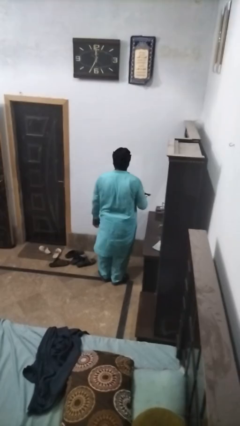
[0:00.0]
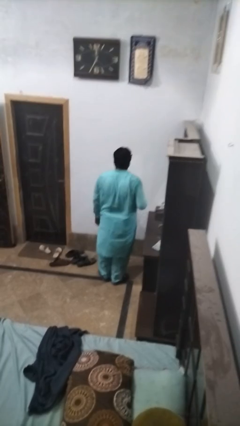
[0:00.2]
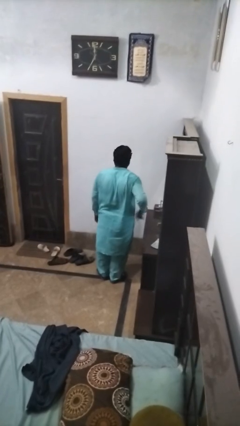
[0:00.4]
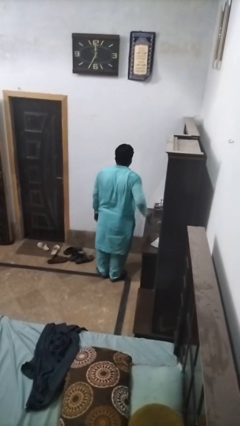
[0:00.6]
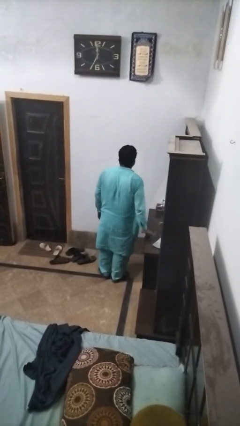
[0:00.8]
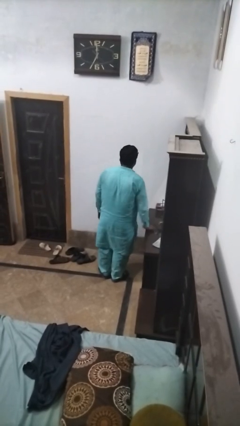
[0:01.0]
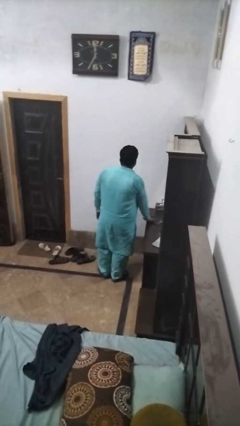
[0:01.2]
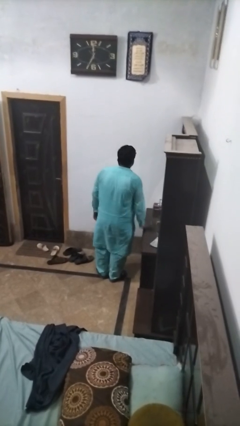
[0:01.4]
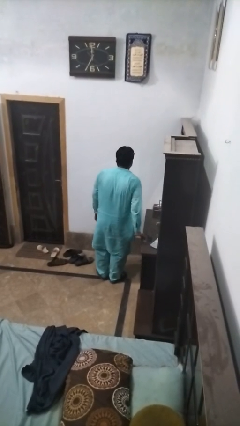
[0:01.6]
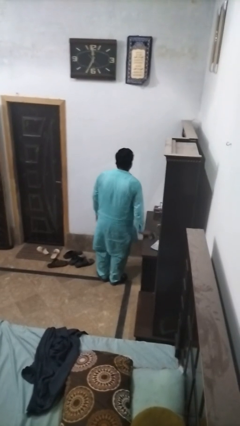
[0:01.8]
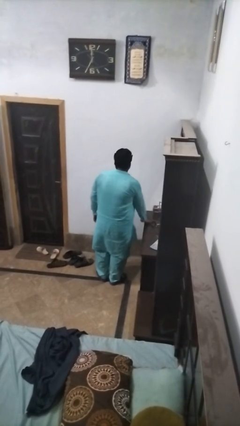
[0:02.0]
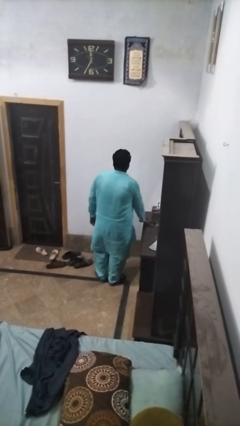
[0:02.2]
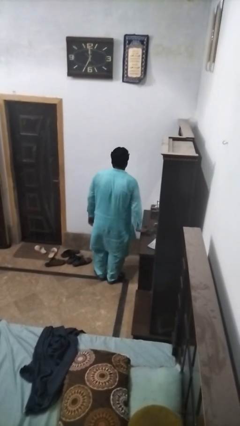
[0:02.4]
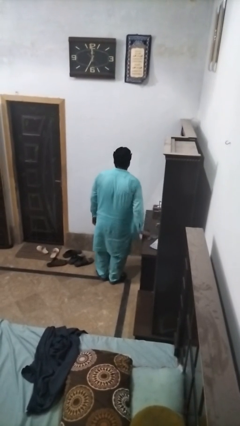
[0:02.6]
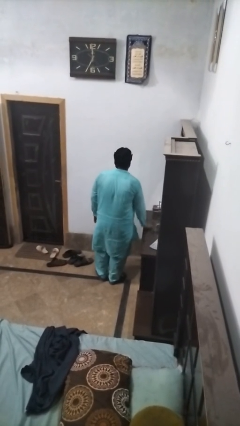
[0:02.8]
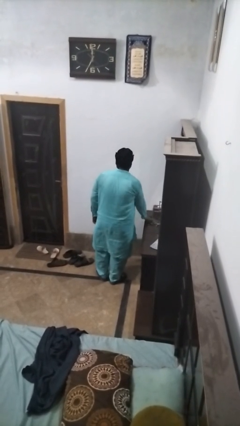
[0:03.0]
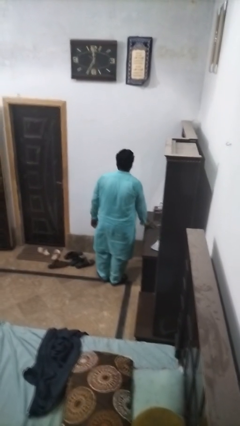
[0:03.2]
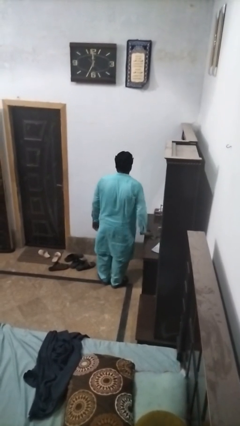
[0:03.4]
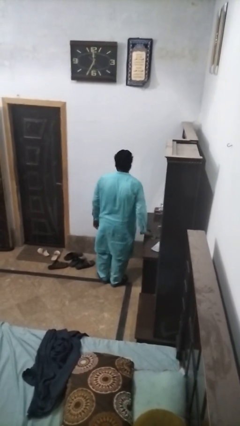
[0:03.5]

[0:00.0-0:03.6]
person cleans table with rag

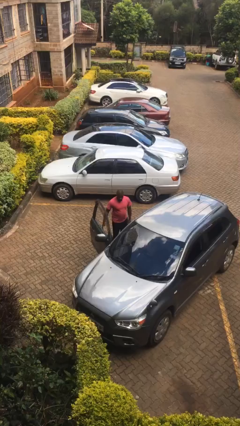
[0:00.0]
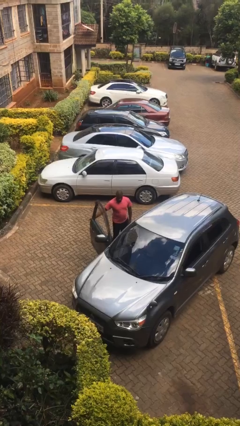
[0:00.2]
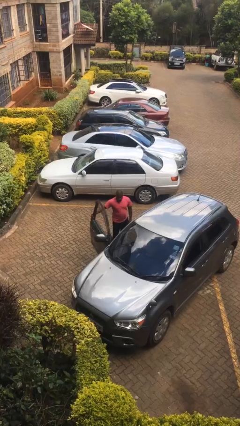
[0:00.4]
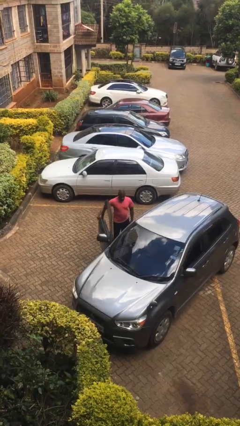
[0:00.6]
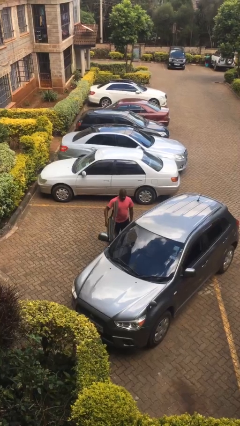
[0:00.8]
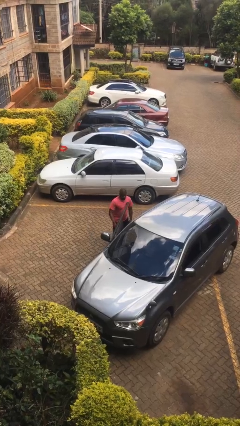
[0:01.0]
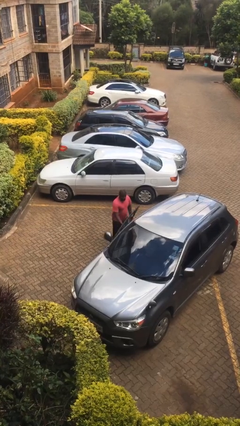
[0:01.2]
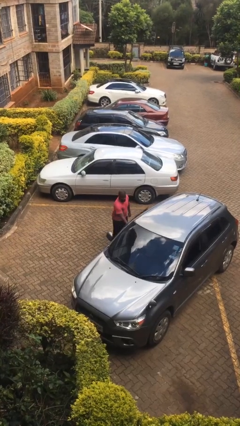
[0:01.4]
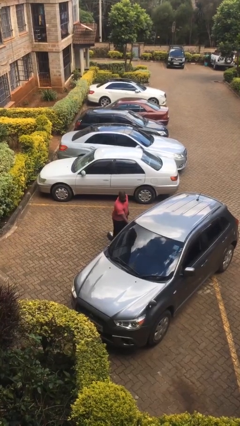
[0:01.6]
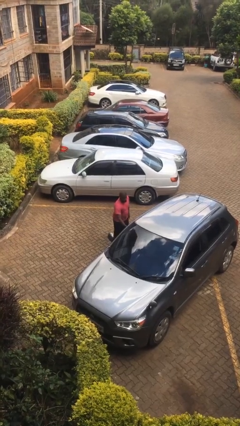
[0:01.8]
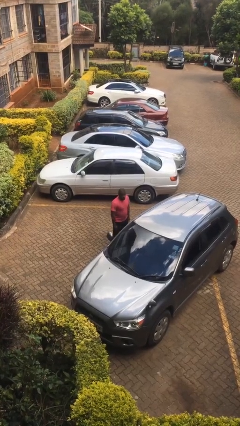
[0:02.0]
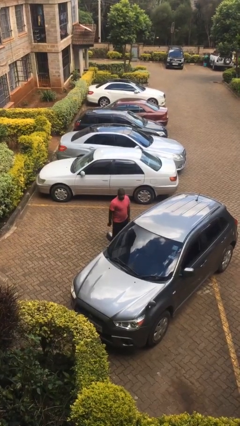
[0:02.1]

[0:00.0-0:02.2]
person closes car door

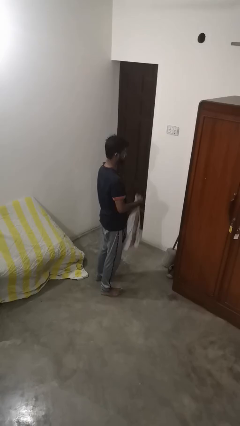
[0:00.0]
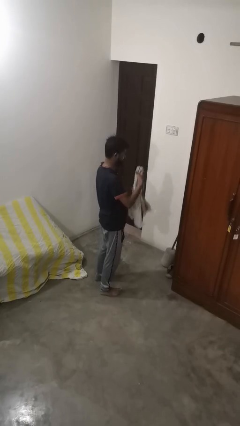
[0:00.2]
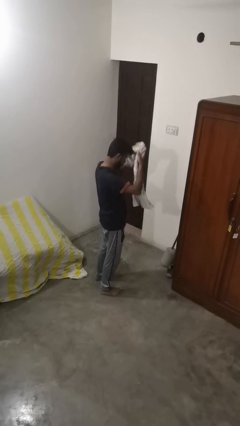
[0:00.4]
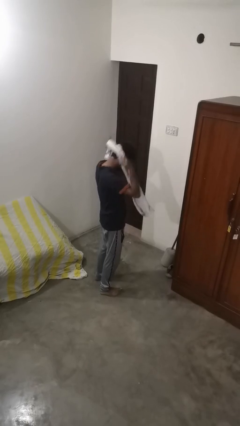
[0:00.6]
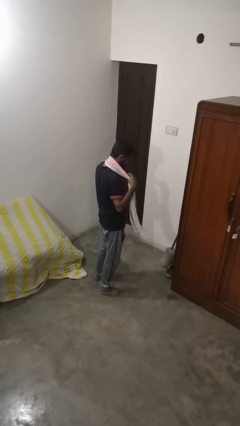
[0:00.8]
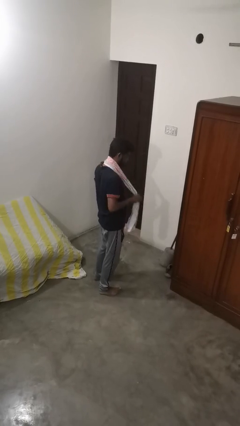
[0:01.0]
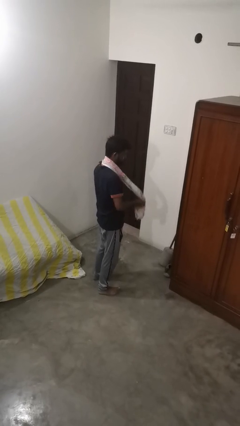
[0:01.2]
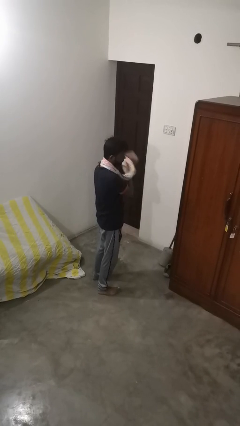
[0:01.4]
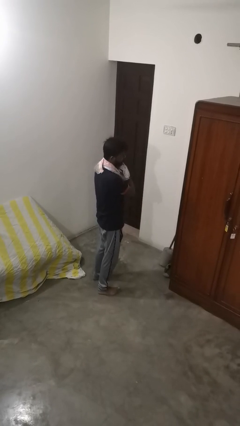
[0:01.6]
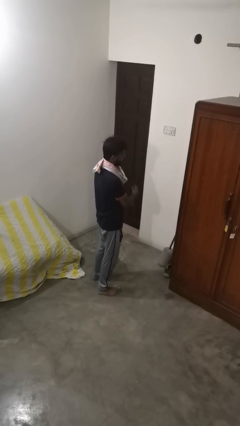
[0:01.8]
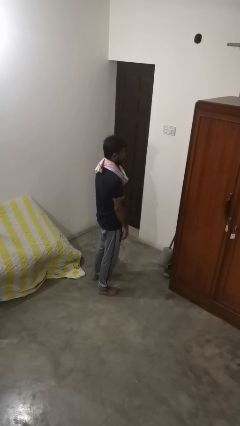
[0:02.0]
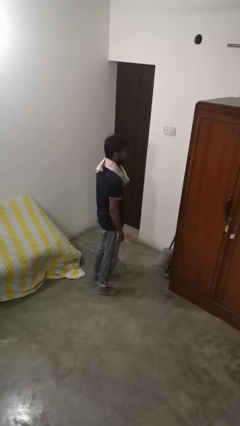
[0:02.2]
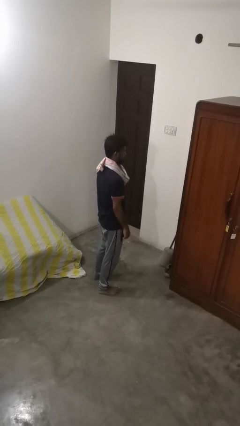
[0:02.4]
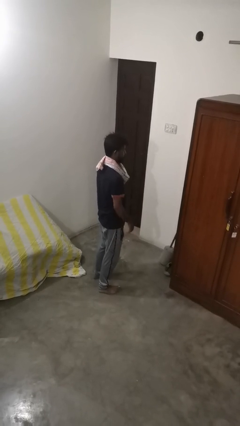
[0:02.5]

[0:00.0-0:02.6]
person puts on scarf

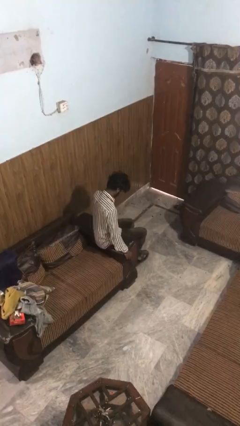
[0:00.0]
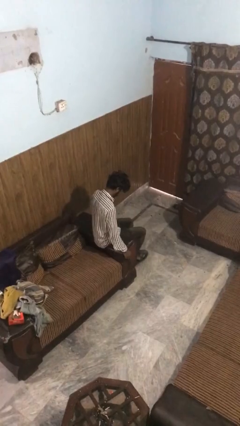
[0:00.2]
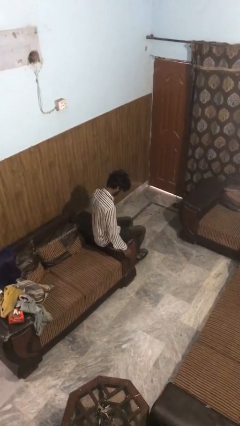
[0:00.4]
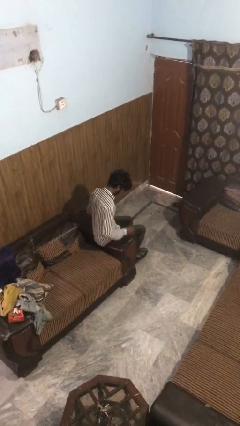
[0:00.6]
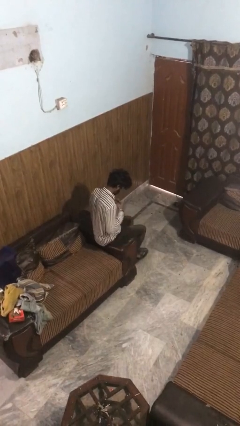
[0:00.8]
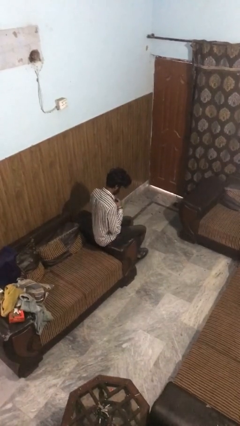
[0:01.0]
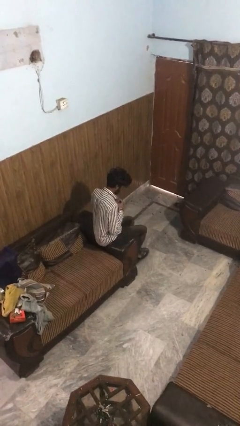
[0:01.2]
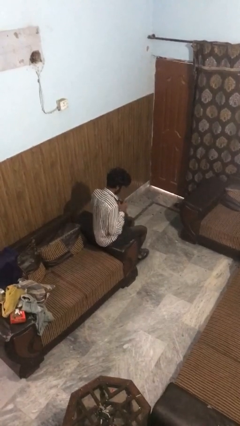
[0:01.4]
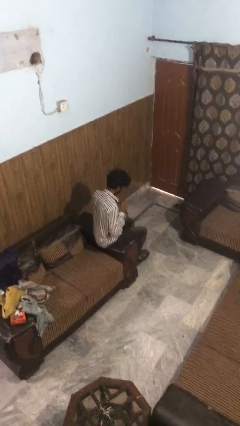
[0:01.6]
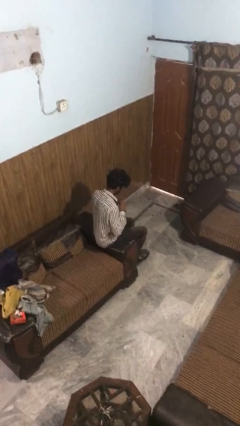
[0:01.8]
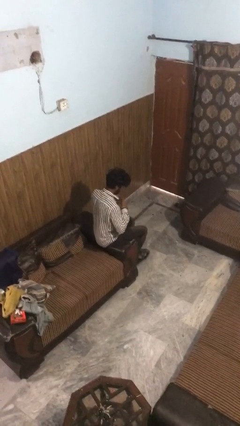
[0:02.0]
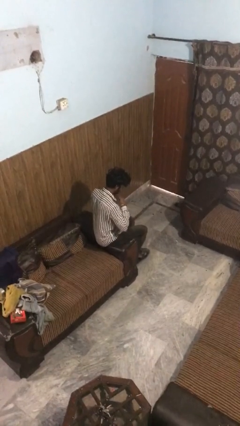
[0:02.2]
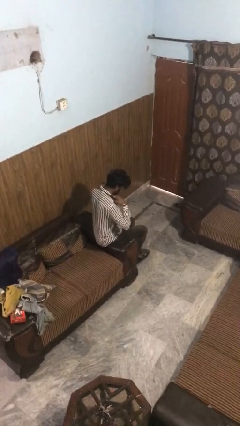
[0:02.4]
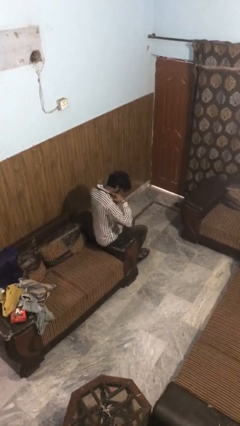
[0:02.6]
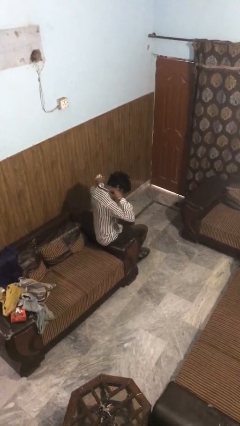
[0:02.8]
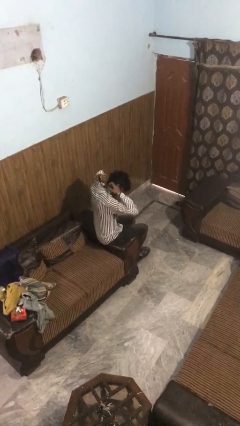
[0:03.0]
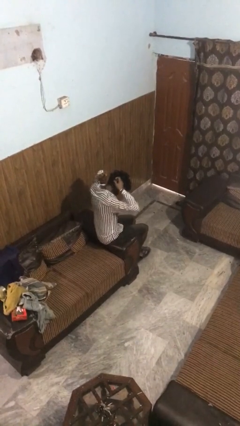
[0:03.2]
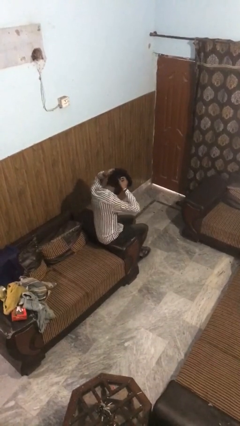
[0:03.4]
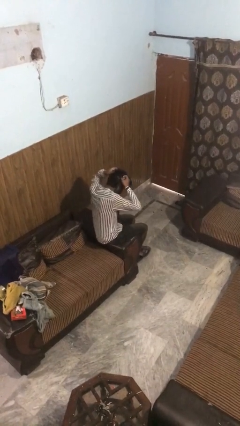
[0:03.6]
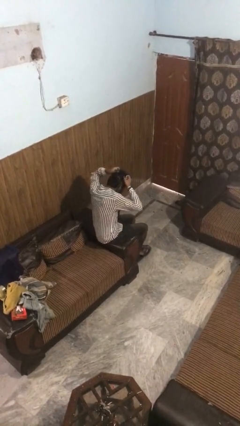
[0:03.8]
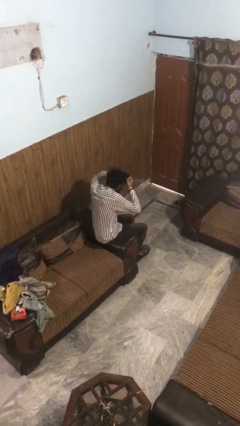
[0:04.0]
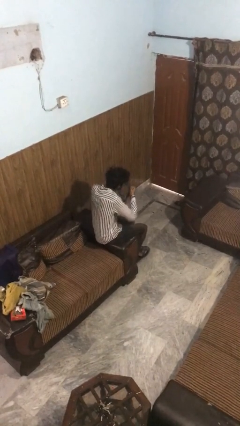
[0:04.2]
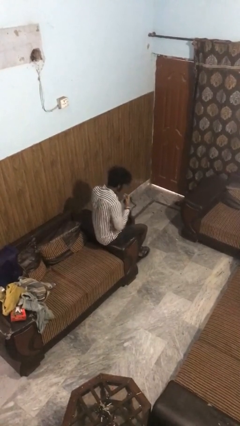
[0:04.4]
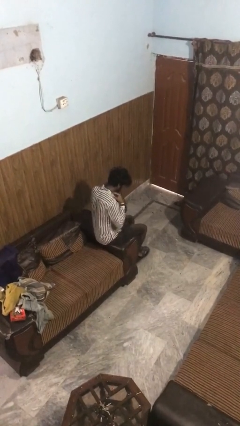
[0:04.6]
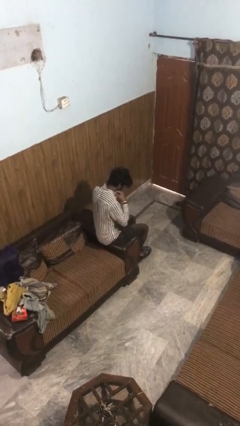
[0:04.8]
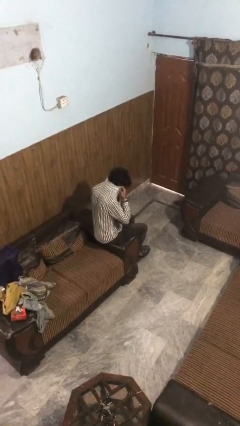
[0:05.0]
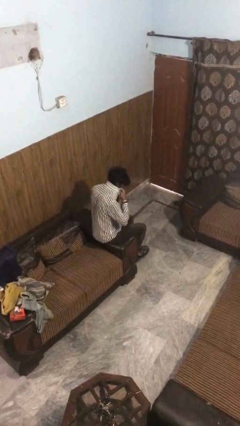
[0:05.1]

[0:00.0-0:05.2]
person takes off necktie

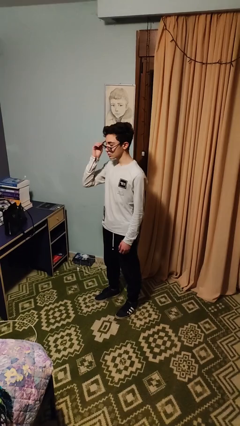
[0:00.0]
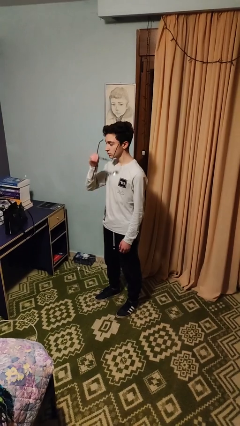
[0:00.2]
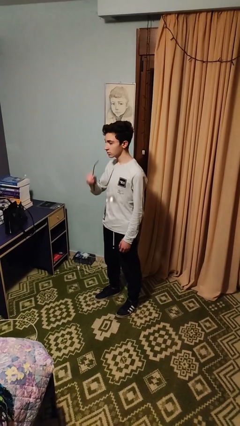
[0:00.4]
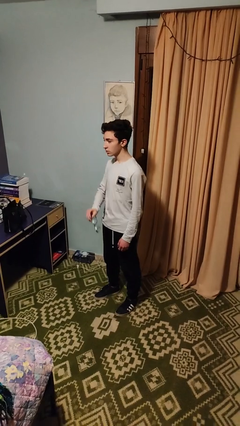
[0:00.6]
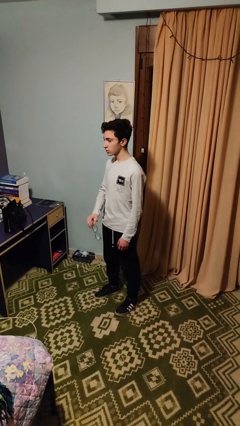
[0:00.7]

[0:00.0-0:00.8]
person takes off glasses

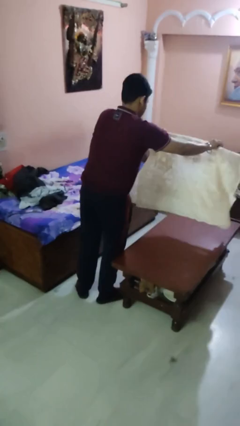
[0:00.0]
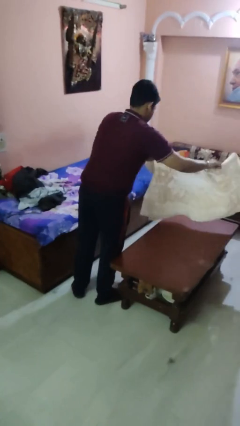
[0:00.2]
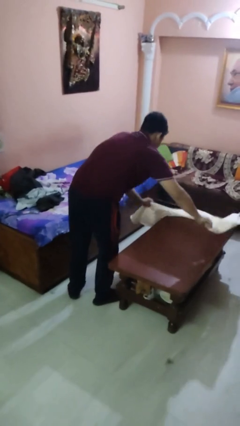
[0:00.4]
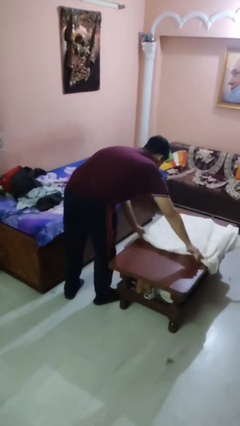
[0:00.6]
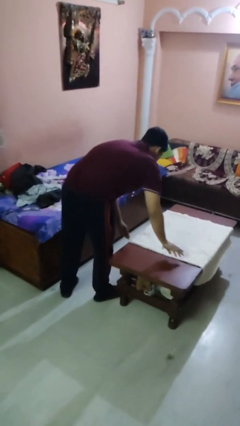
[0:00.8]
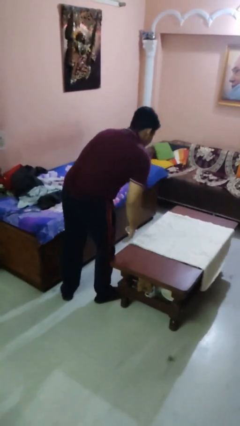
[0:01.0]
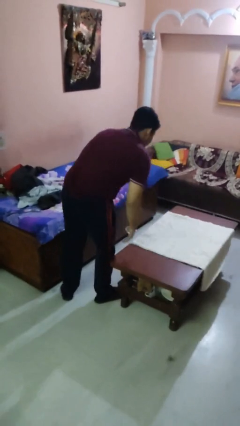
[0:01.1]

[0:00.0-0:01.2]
person spreads tablecloth

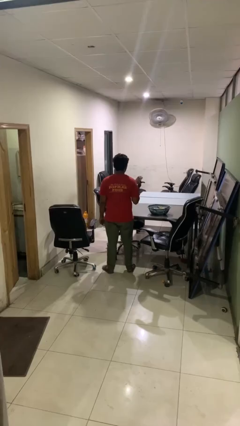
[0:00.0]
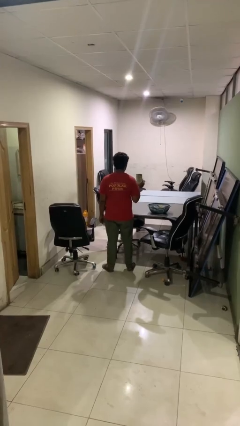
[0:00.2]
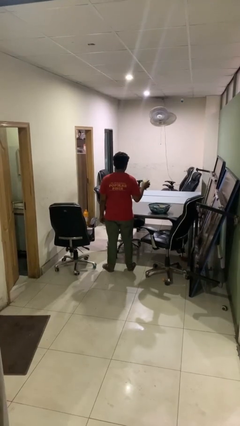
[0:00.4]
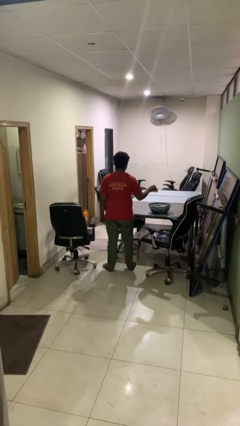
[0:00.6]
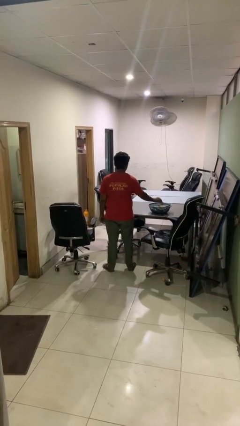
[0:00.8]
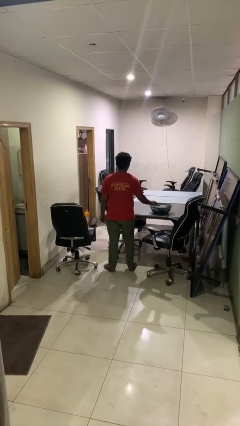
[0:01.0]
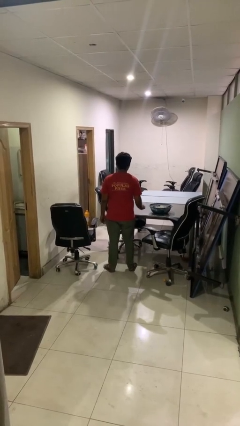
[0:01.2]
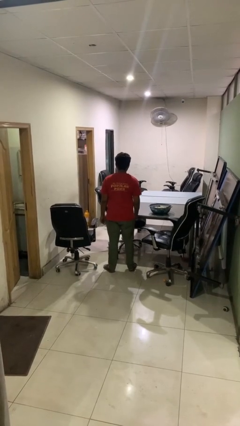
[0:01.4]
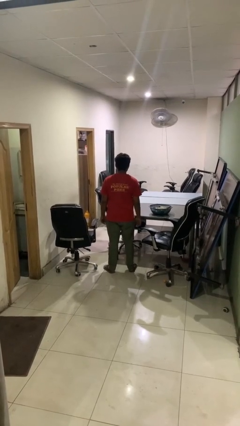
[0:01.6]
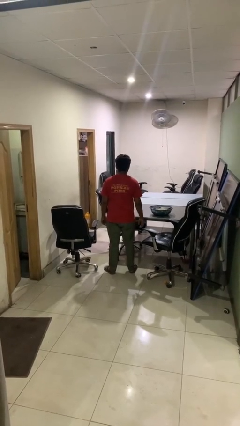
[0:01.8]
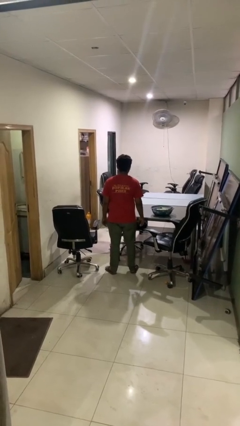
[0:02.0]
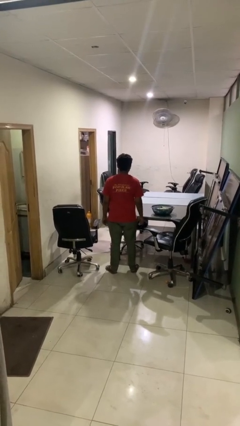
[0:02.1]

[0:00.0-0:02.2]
person puts object into basket
